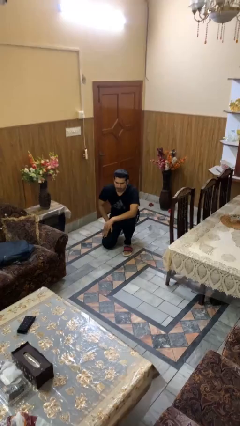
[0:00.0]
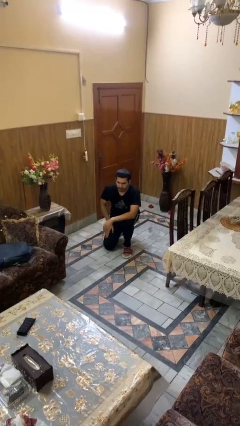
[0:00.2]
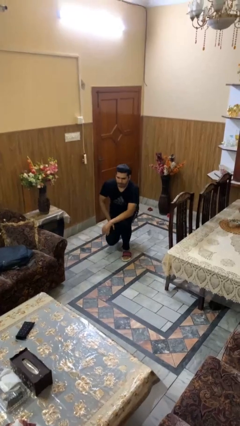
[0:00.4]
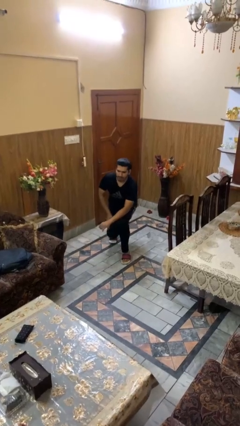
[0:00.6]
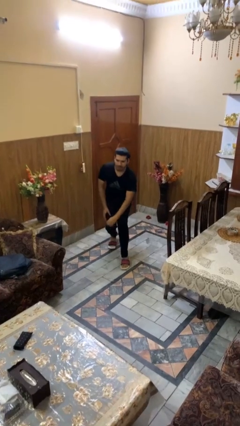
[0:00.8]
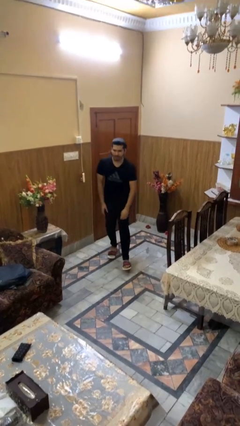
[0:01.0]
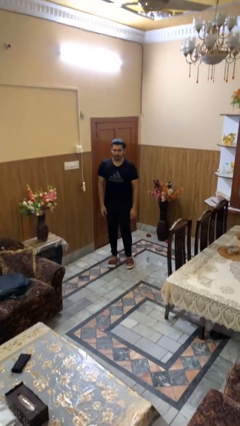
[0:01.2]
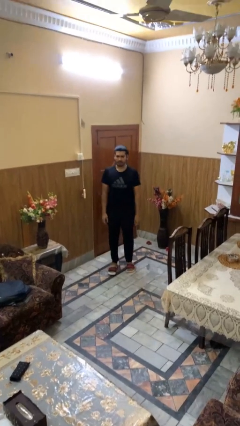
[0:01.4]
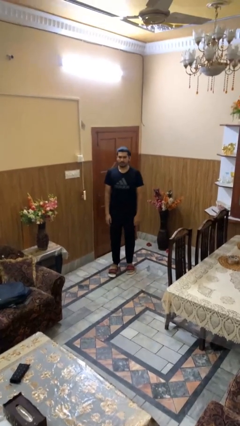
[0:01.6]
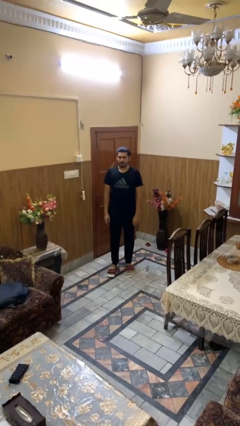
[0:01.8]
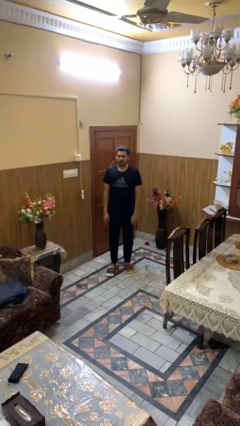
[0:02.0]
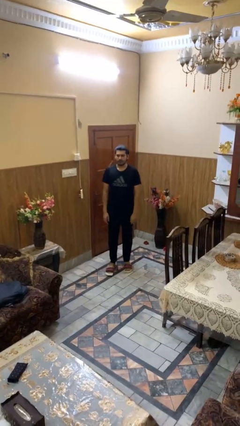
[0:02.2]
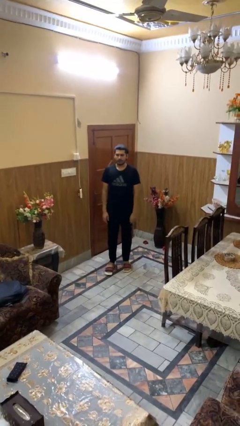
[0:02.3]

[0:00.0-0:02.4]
person stands up from floor

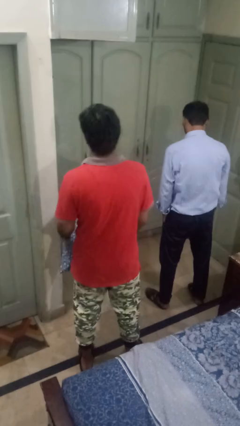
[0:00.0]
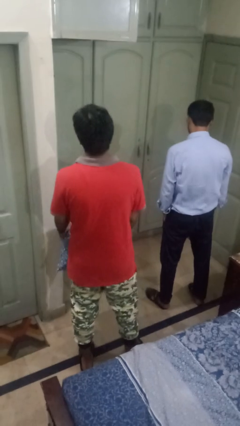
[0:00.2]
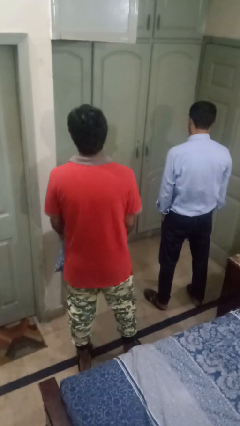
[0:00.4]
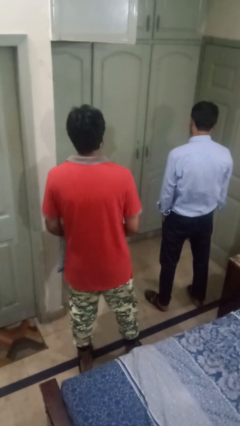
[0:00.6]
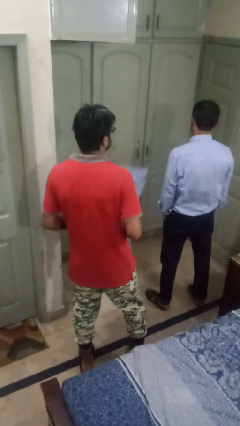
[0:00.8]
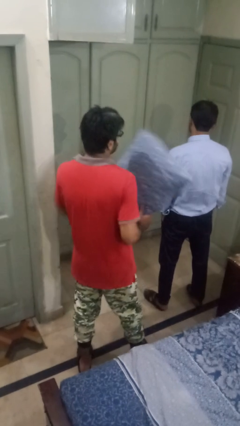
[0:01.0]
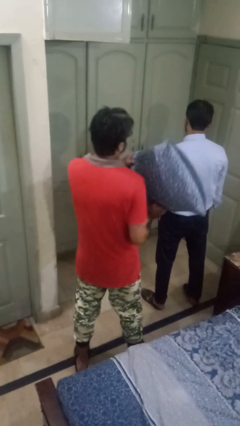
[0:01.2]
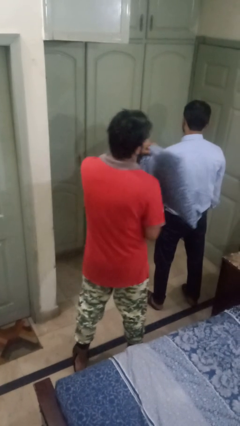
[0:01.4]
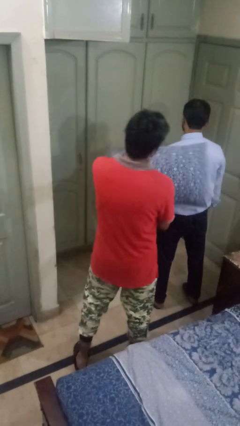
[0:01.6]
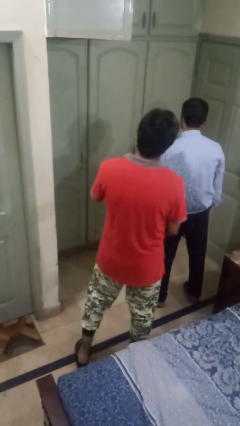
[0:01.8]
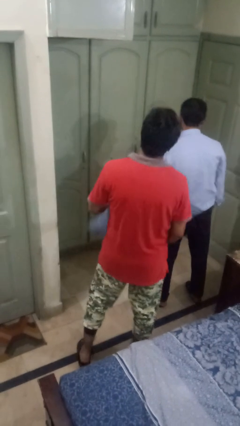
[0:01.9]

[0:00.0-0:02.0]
person hits person with pillow

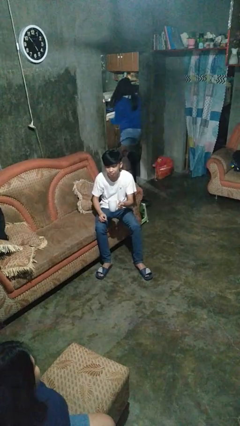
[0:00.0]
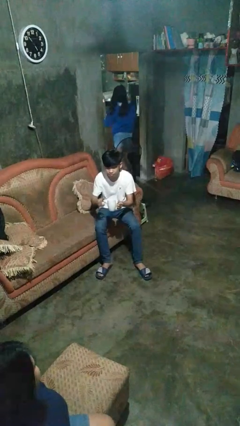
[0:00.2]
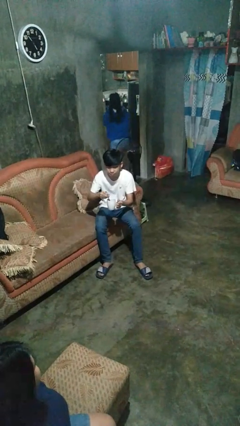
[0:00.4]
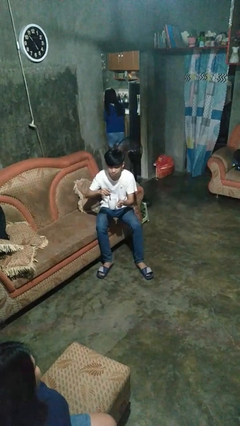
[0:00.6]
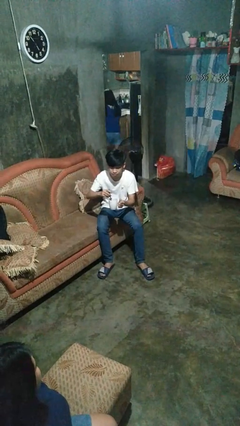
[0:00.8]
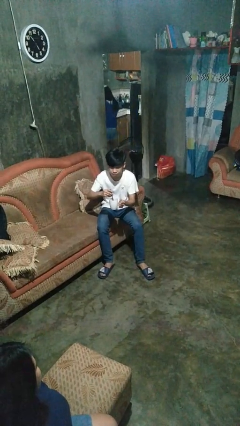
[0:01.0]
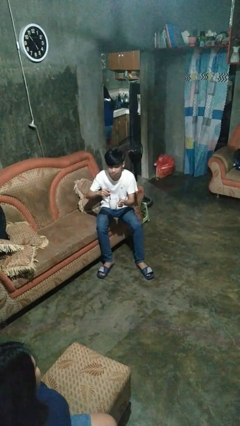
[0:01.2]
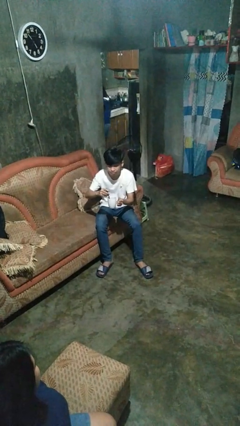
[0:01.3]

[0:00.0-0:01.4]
person stirs mug

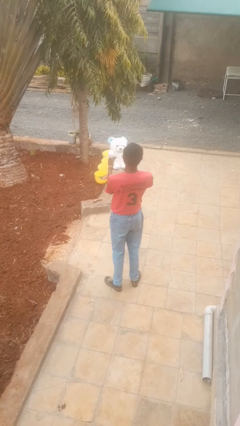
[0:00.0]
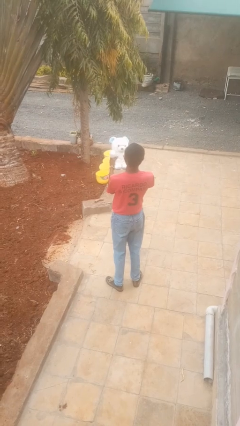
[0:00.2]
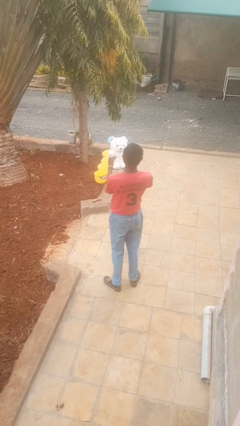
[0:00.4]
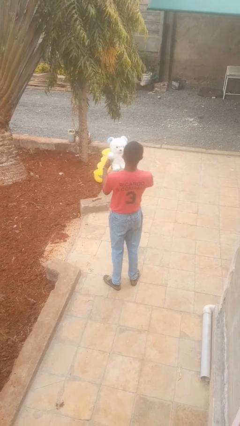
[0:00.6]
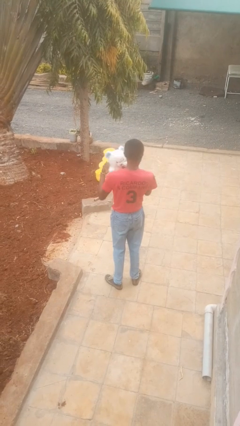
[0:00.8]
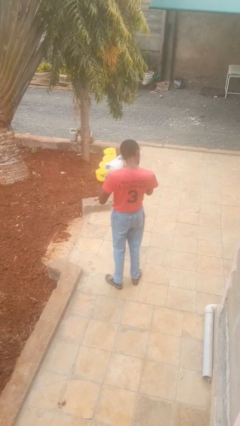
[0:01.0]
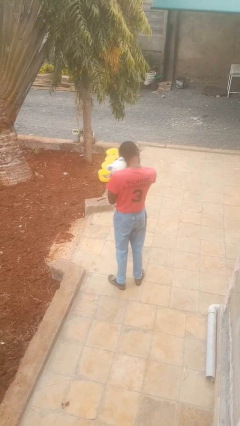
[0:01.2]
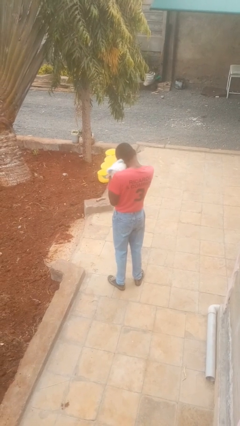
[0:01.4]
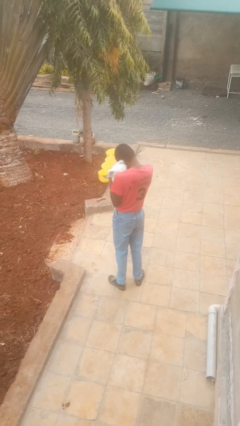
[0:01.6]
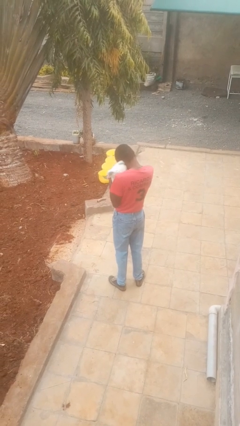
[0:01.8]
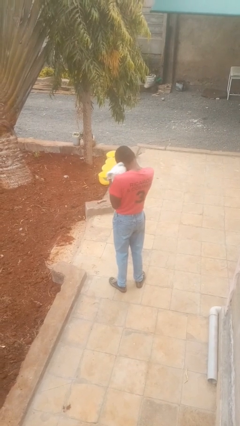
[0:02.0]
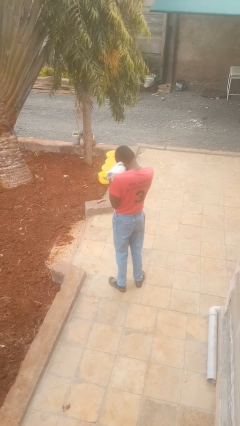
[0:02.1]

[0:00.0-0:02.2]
person hugs stuffed animal

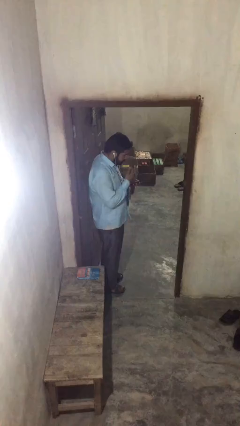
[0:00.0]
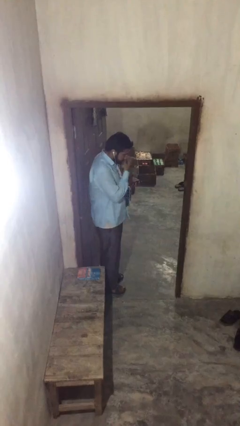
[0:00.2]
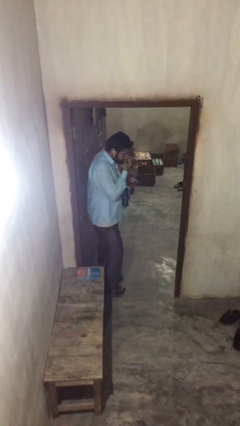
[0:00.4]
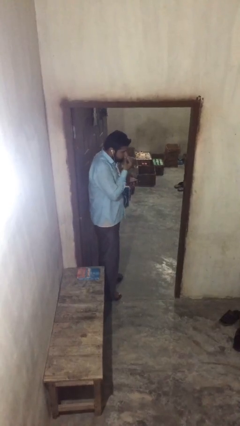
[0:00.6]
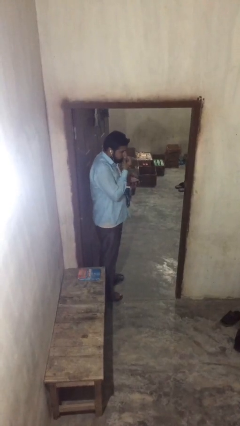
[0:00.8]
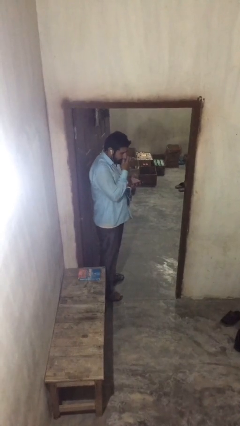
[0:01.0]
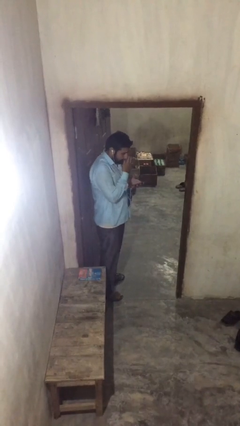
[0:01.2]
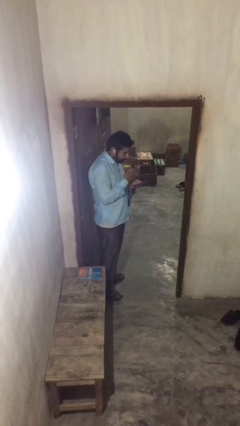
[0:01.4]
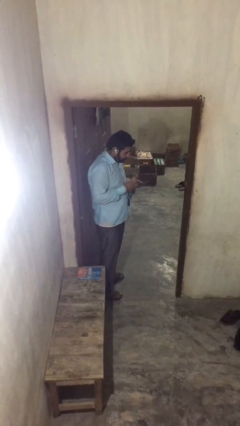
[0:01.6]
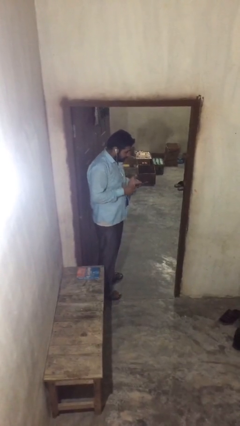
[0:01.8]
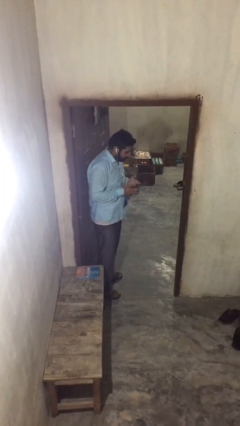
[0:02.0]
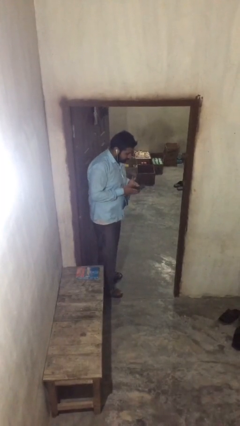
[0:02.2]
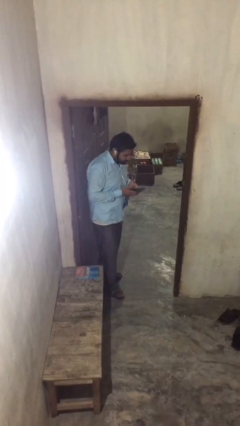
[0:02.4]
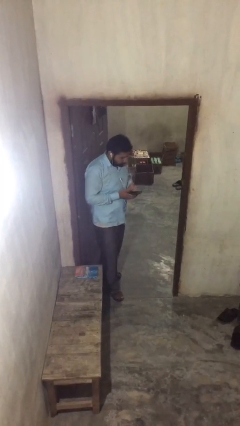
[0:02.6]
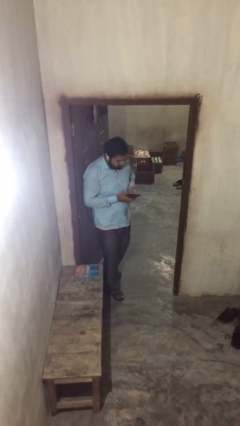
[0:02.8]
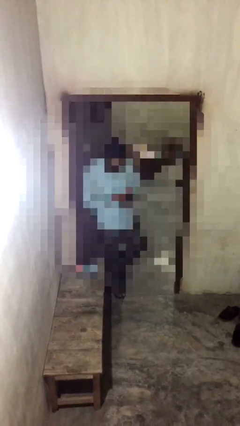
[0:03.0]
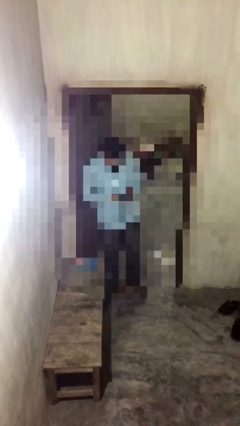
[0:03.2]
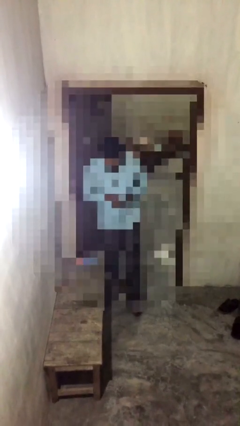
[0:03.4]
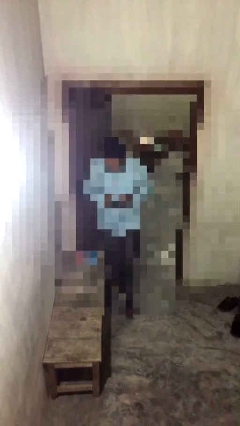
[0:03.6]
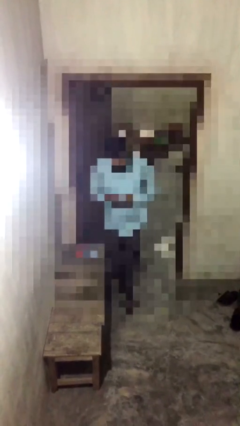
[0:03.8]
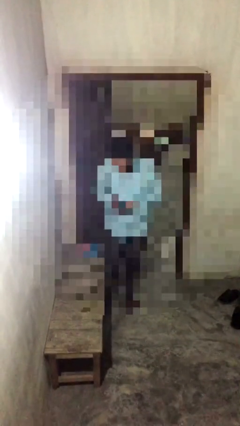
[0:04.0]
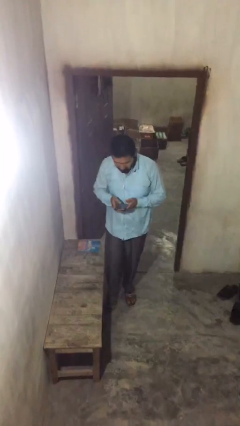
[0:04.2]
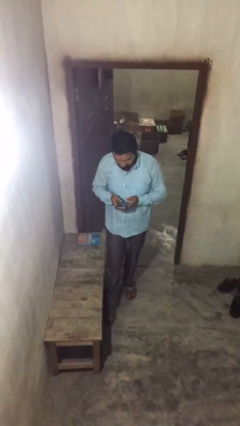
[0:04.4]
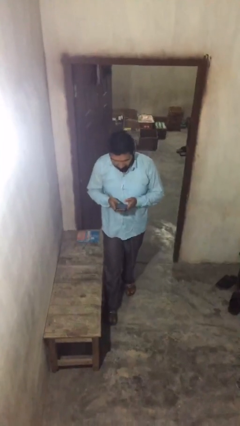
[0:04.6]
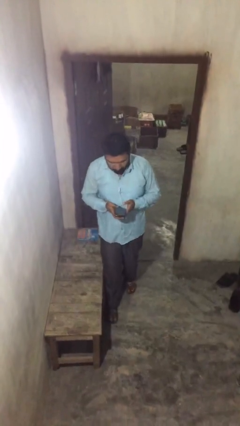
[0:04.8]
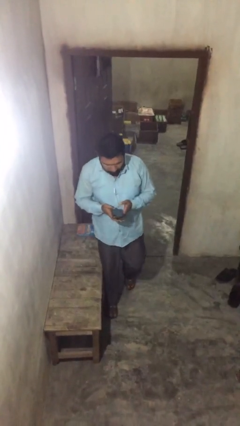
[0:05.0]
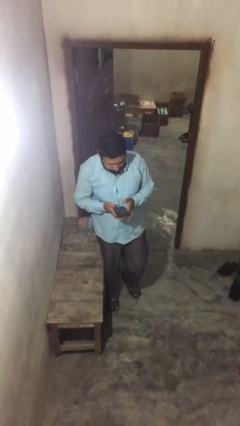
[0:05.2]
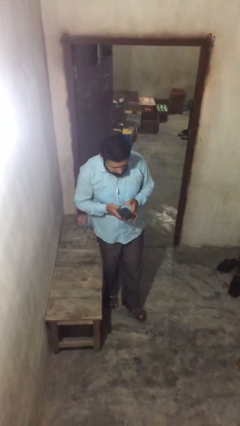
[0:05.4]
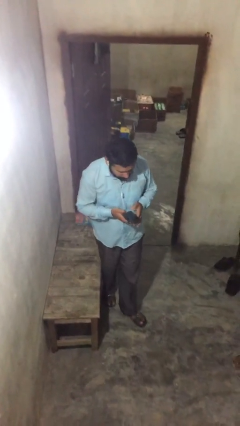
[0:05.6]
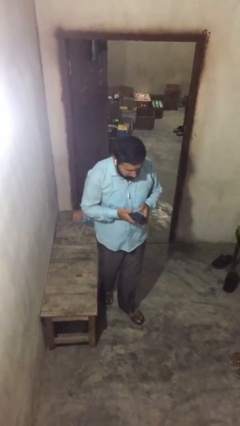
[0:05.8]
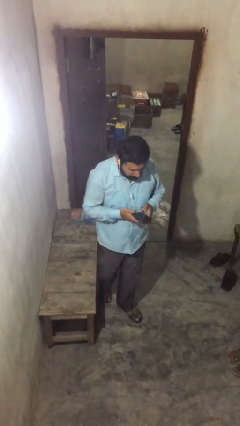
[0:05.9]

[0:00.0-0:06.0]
person texts on phone

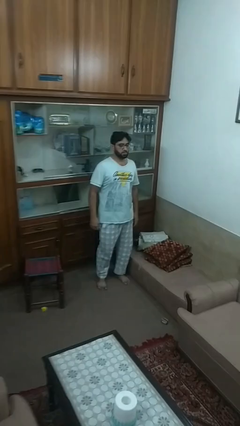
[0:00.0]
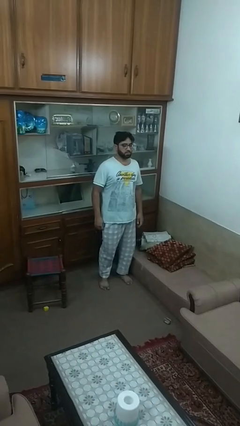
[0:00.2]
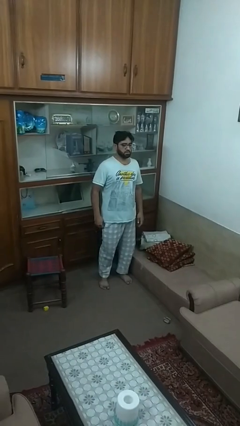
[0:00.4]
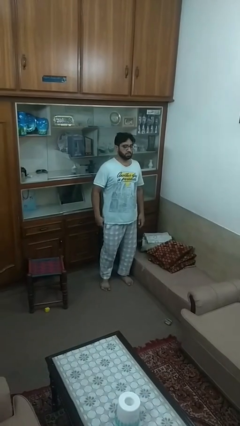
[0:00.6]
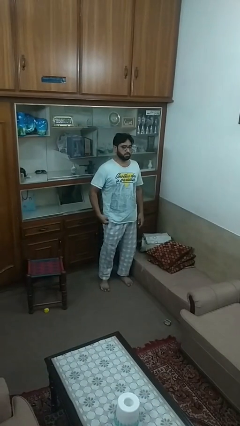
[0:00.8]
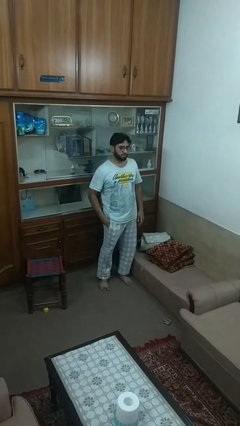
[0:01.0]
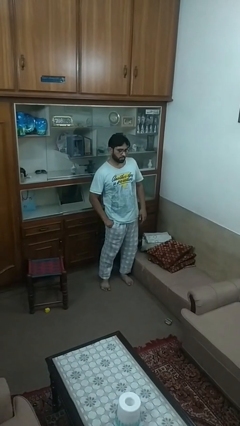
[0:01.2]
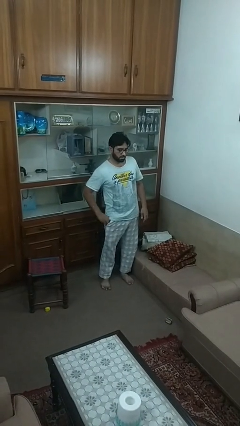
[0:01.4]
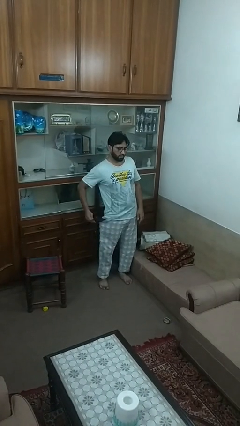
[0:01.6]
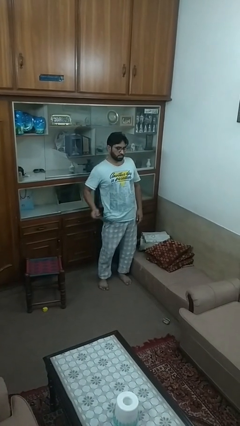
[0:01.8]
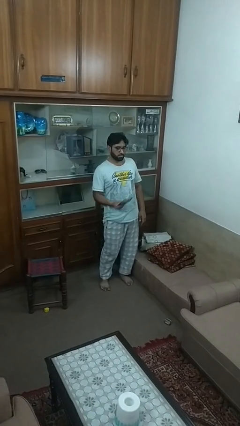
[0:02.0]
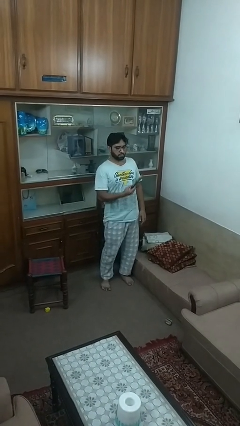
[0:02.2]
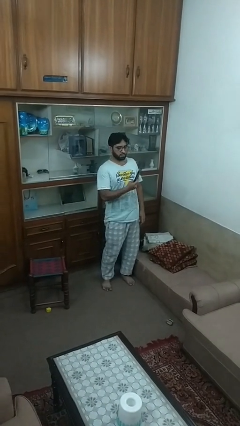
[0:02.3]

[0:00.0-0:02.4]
person takes phone from pocket

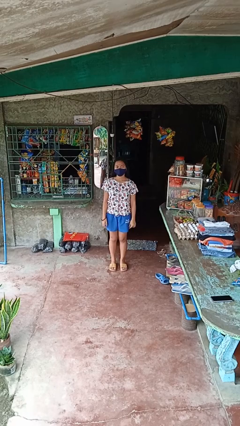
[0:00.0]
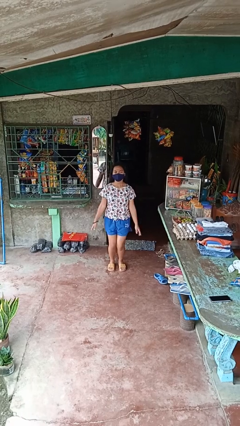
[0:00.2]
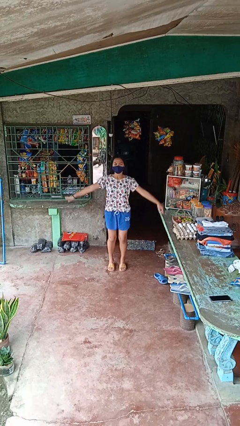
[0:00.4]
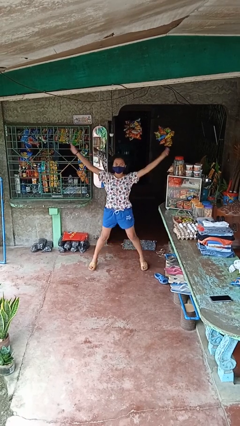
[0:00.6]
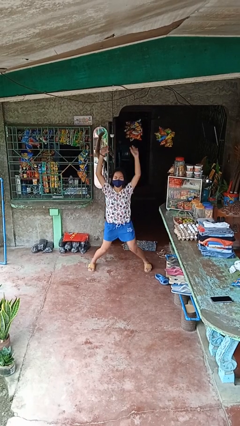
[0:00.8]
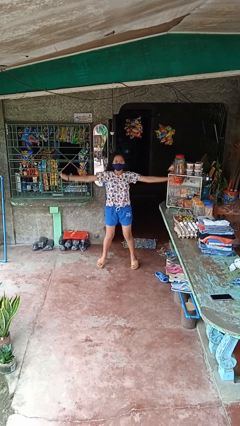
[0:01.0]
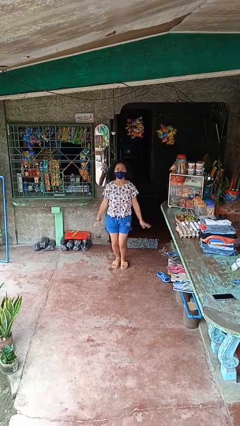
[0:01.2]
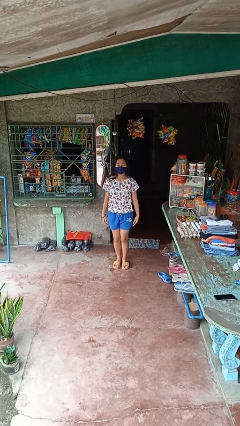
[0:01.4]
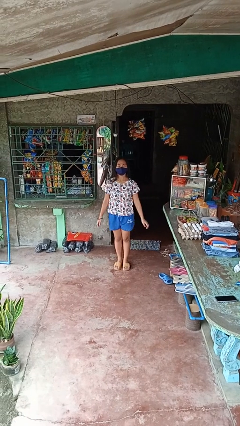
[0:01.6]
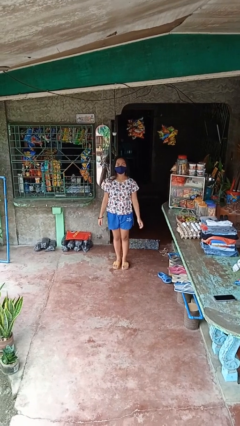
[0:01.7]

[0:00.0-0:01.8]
person exercises with jumping jacks
